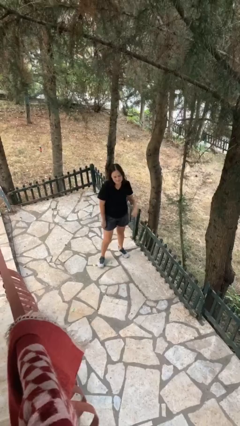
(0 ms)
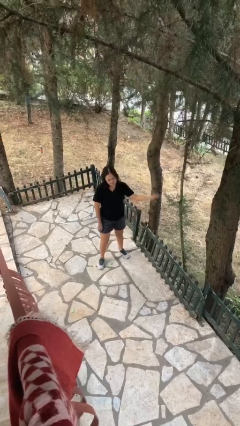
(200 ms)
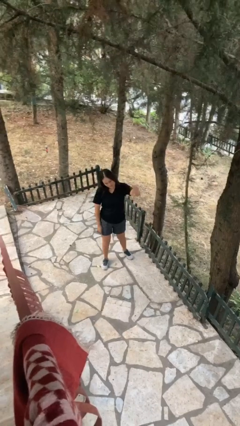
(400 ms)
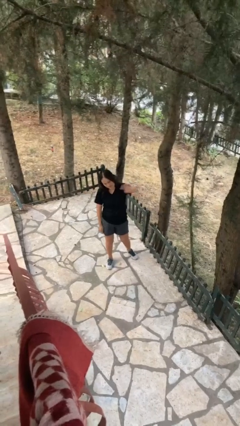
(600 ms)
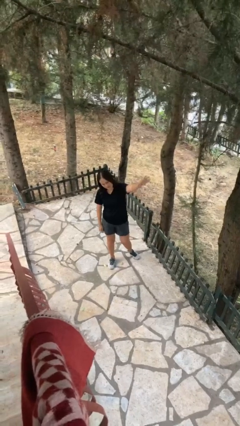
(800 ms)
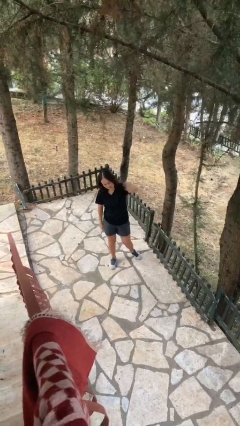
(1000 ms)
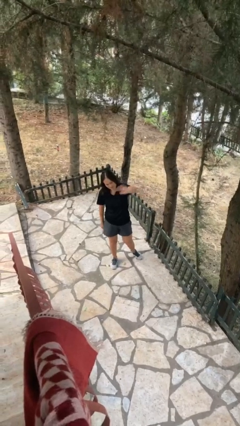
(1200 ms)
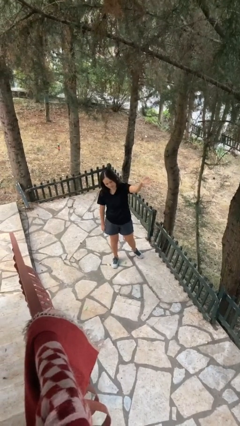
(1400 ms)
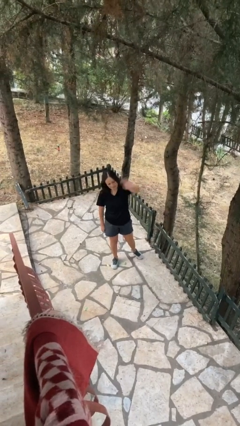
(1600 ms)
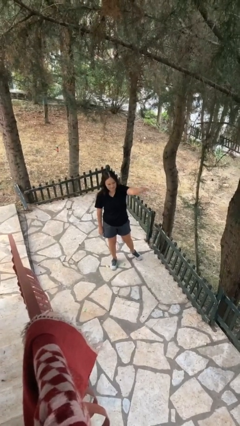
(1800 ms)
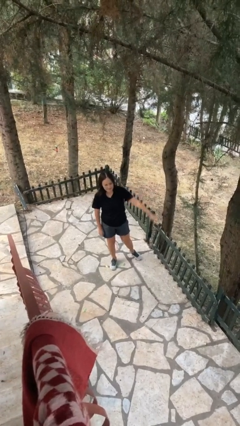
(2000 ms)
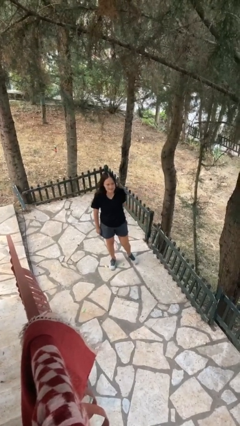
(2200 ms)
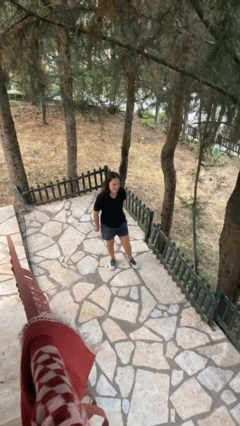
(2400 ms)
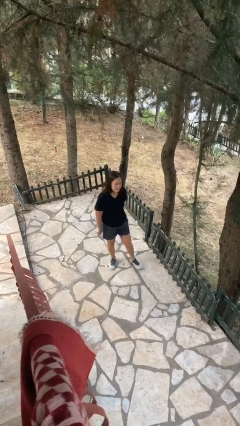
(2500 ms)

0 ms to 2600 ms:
person waves at person

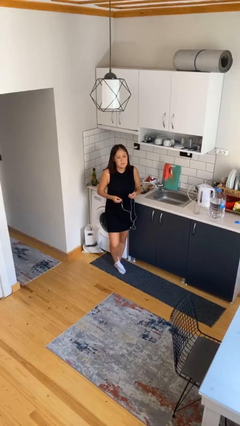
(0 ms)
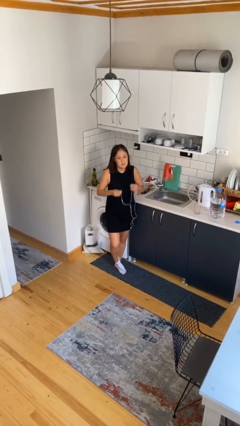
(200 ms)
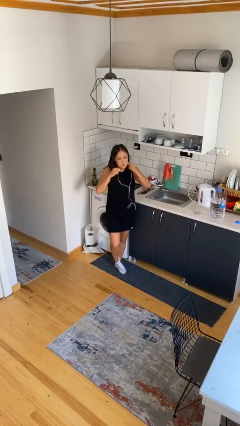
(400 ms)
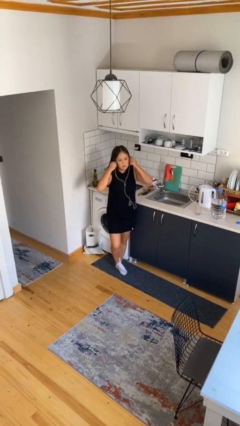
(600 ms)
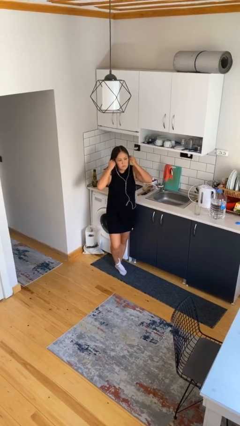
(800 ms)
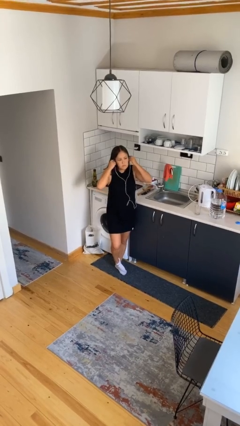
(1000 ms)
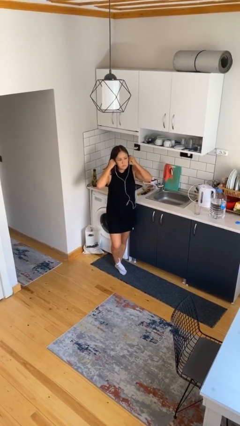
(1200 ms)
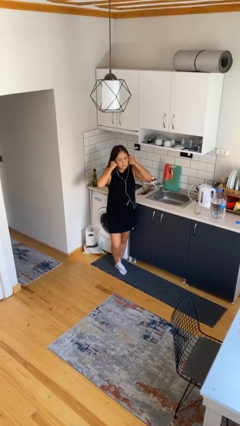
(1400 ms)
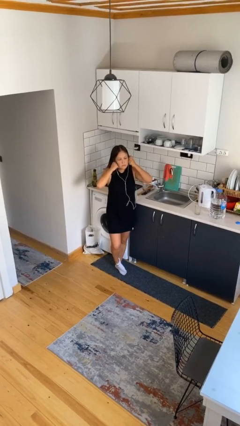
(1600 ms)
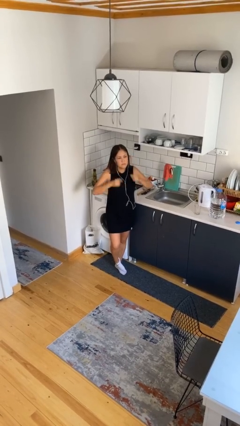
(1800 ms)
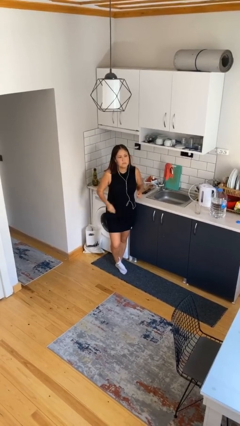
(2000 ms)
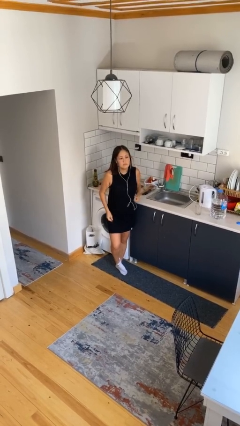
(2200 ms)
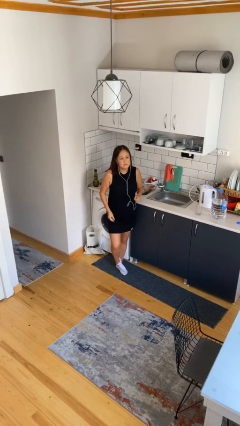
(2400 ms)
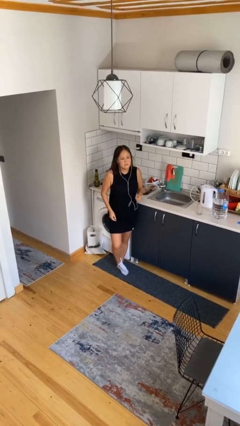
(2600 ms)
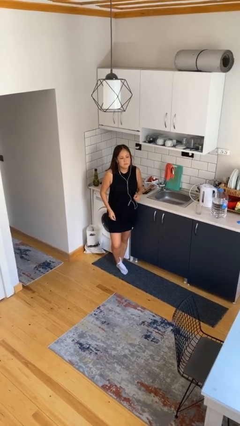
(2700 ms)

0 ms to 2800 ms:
person puts on headphones

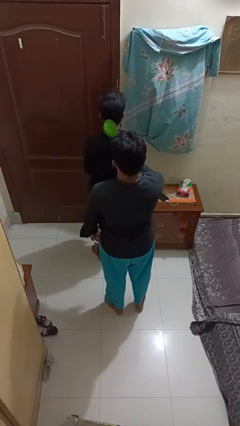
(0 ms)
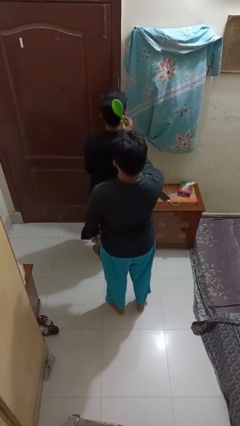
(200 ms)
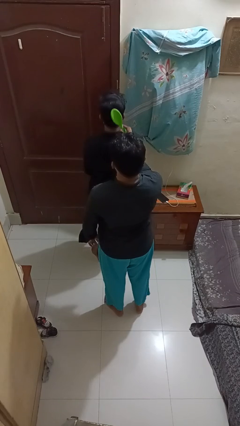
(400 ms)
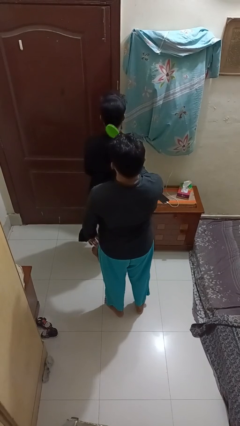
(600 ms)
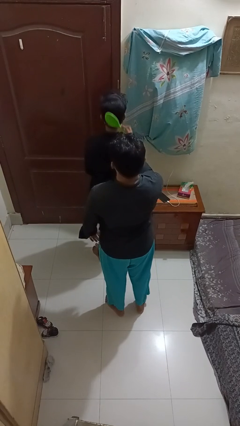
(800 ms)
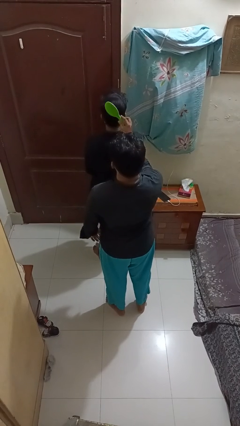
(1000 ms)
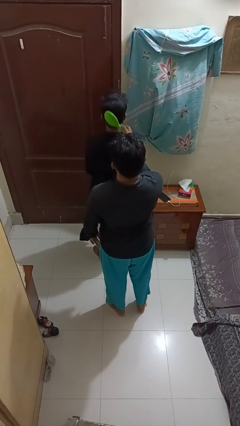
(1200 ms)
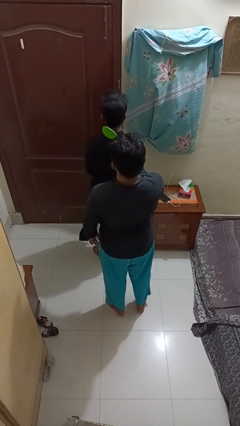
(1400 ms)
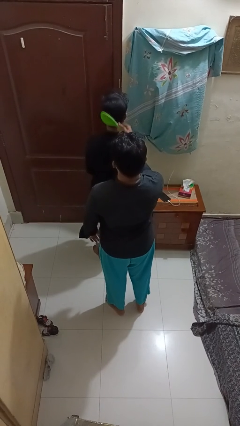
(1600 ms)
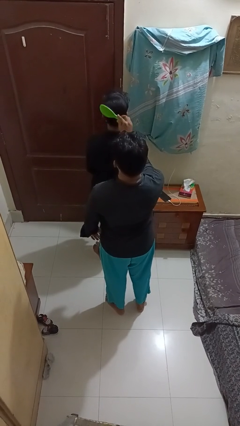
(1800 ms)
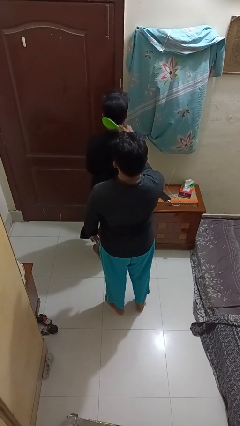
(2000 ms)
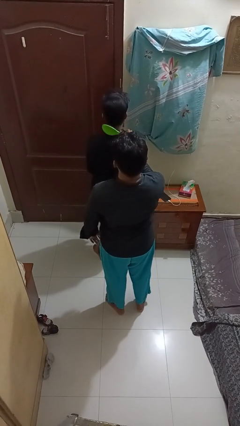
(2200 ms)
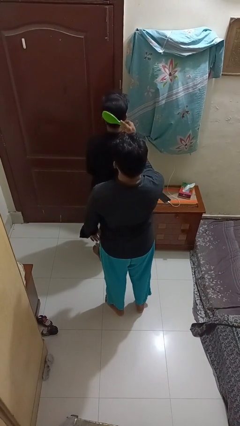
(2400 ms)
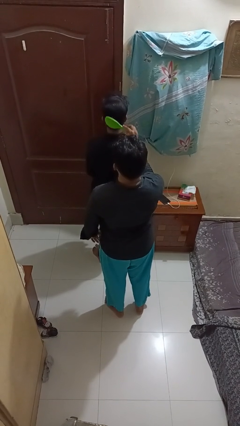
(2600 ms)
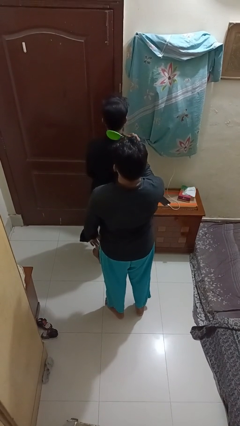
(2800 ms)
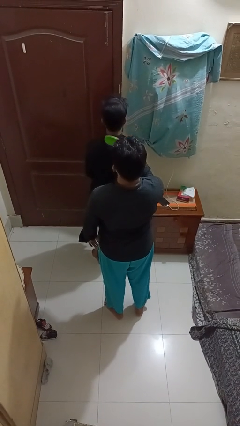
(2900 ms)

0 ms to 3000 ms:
person brushes hair of person

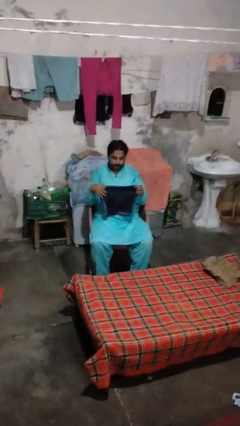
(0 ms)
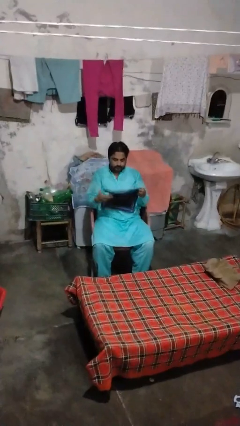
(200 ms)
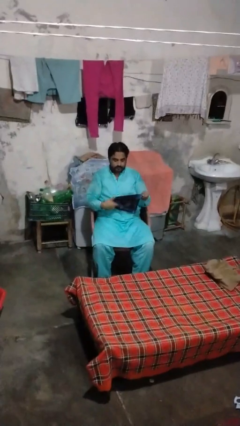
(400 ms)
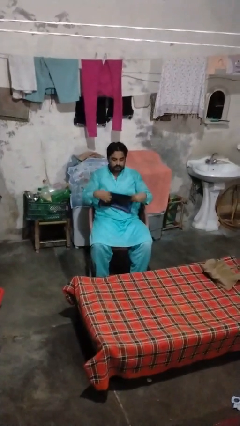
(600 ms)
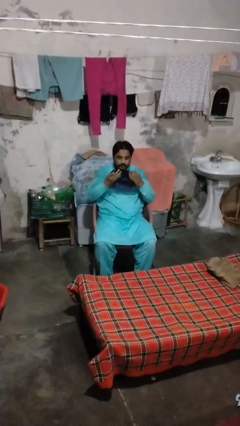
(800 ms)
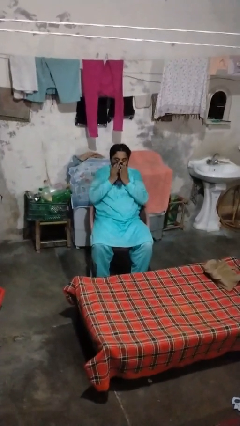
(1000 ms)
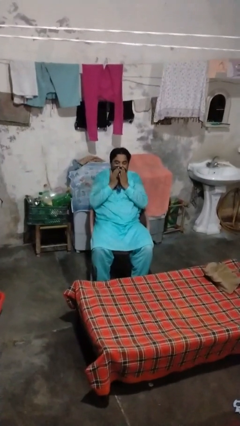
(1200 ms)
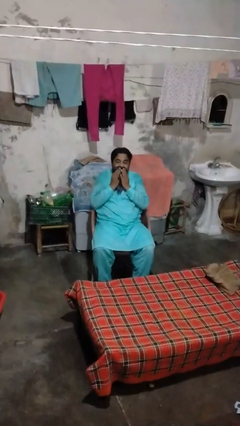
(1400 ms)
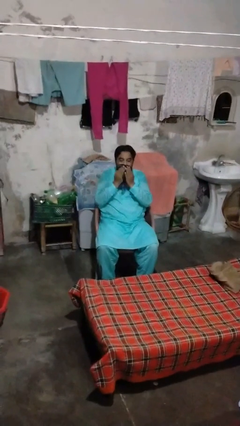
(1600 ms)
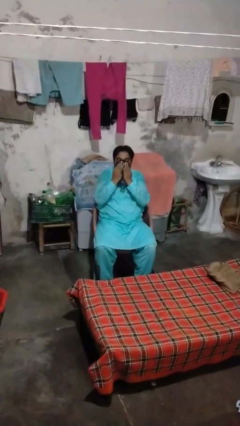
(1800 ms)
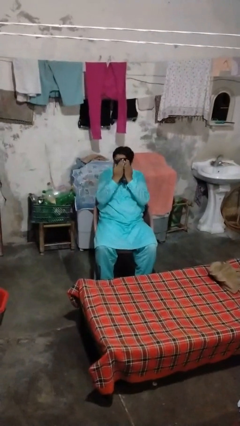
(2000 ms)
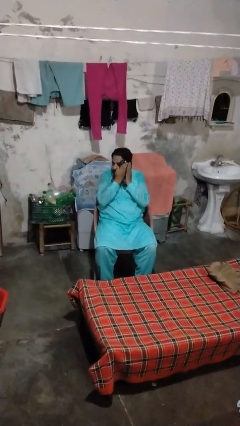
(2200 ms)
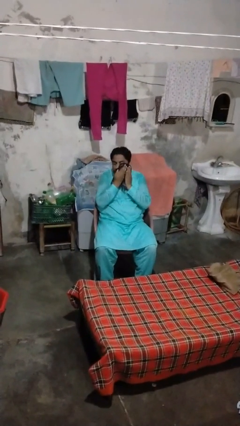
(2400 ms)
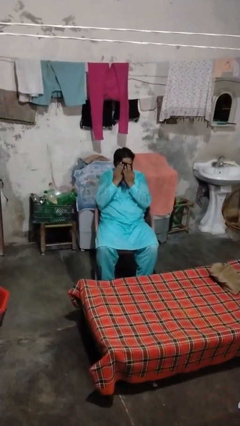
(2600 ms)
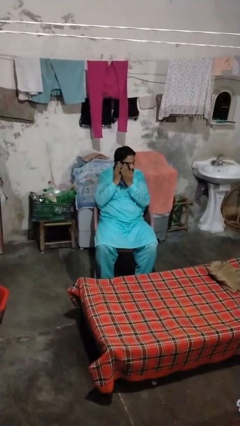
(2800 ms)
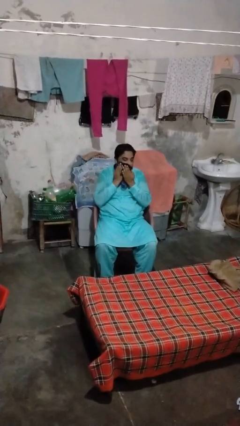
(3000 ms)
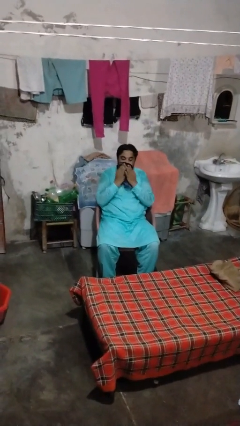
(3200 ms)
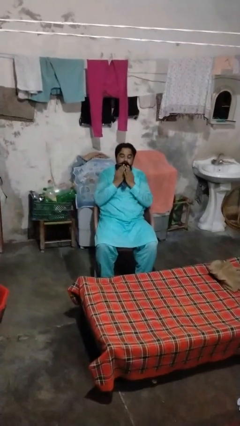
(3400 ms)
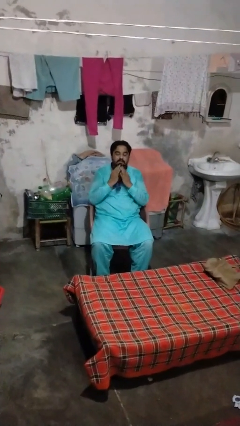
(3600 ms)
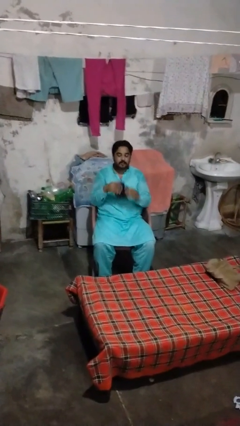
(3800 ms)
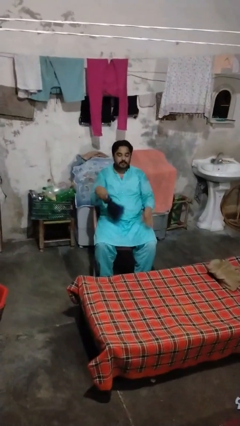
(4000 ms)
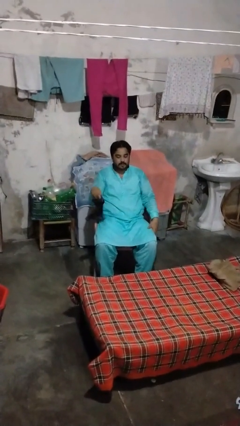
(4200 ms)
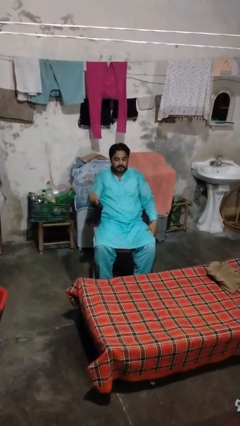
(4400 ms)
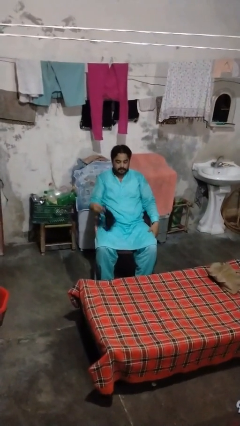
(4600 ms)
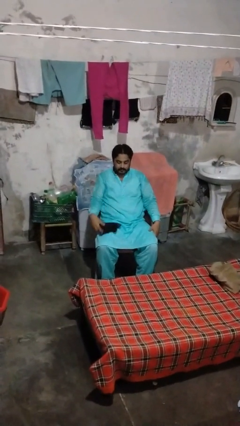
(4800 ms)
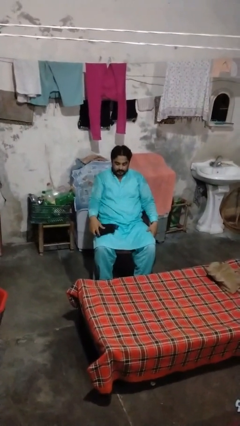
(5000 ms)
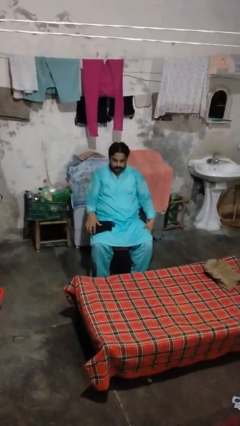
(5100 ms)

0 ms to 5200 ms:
person wipes mouth with napkin

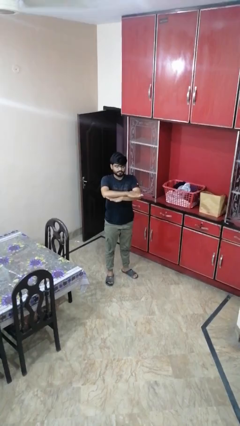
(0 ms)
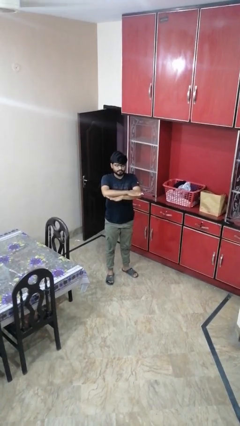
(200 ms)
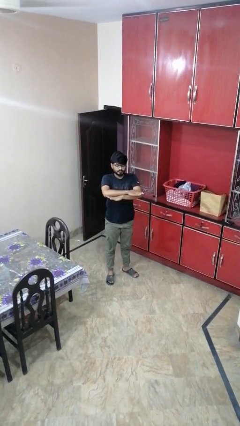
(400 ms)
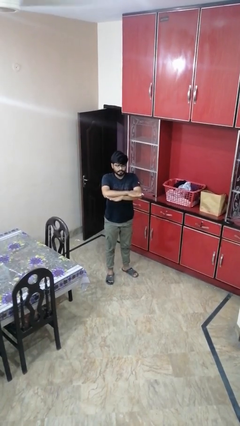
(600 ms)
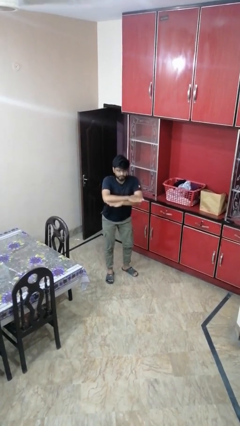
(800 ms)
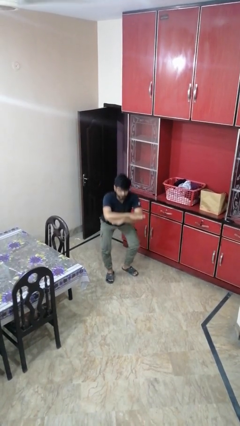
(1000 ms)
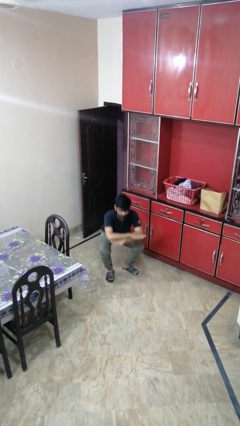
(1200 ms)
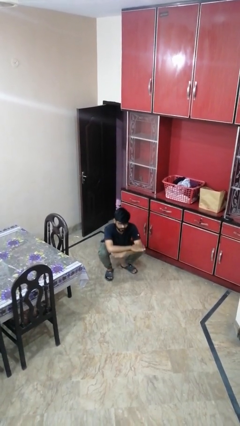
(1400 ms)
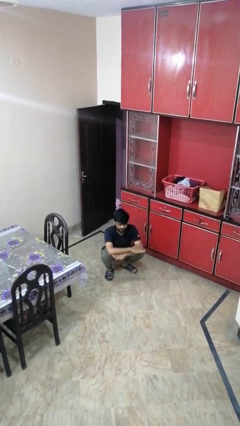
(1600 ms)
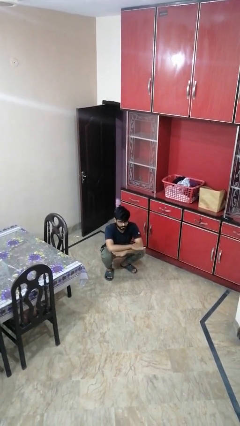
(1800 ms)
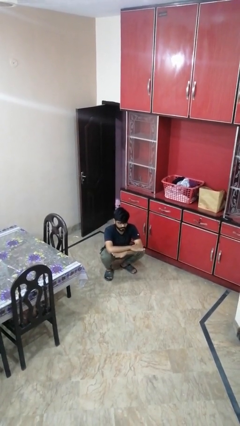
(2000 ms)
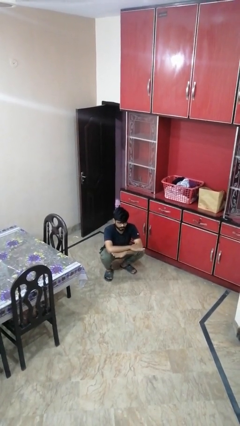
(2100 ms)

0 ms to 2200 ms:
person squats

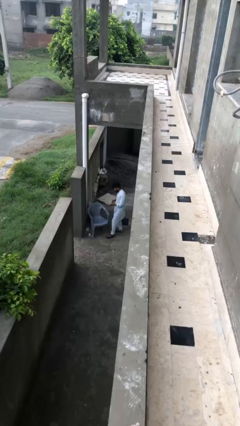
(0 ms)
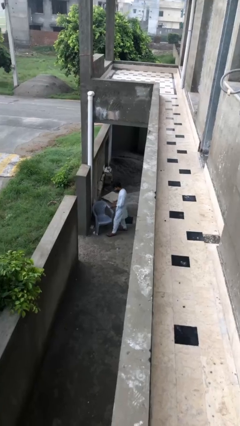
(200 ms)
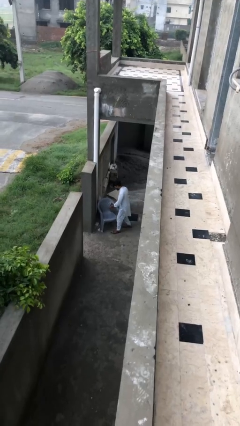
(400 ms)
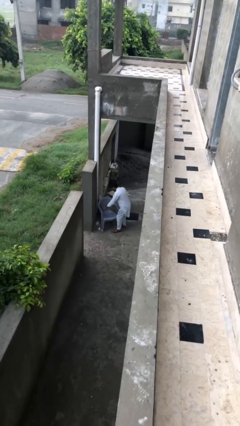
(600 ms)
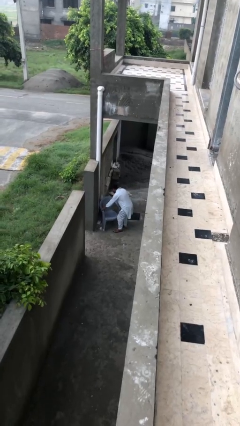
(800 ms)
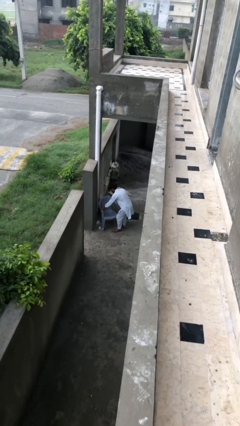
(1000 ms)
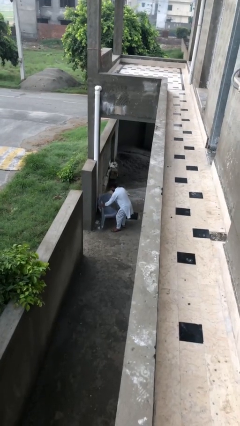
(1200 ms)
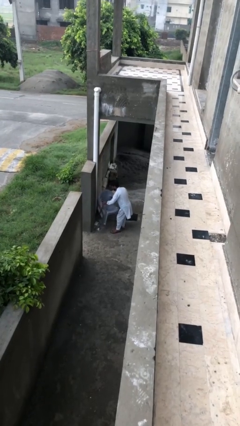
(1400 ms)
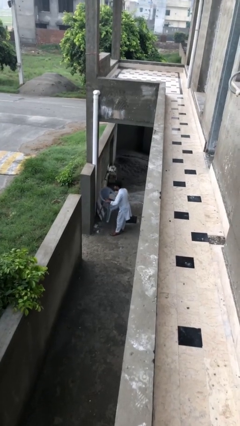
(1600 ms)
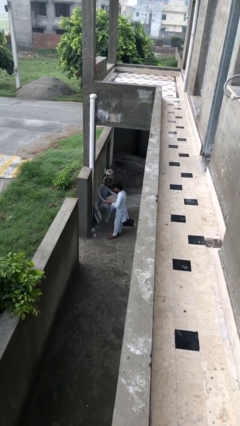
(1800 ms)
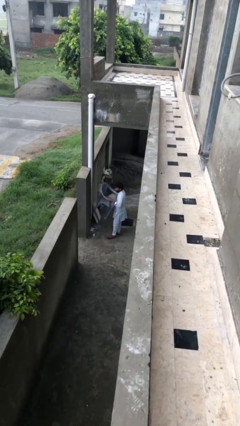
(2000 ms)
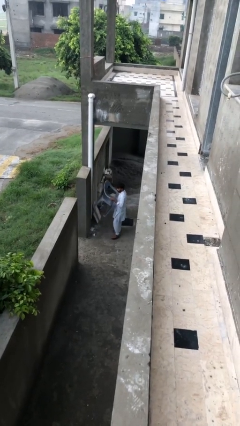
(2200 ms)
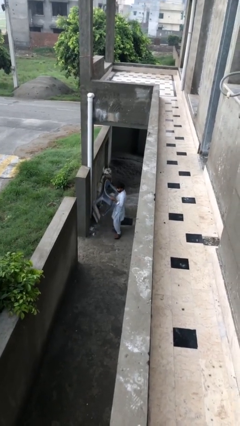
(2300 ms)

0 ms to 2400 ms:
person picks up object from floor
